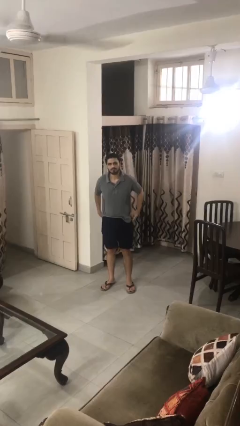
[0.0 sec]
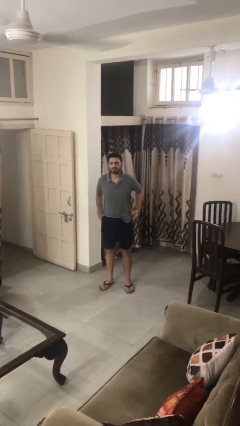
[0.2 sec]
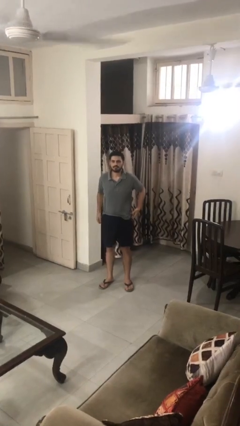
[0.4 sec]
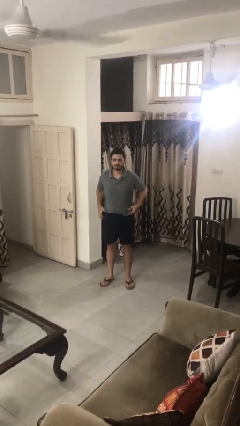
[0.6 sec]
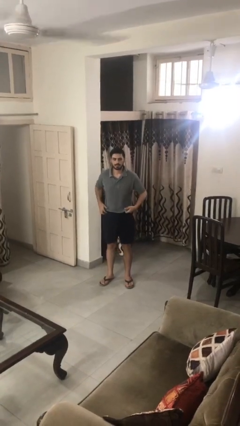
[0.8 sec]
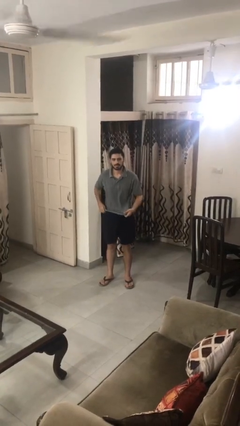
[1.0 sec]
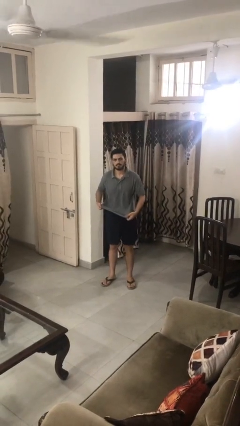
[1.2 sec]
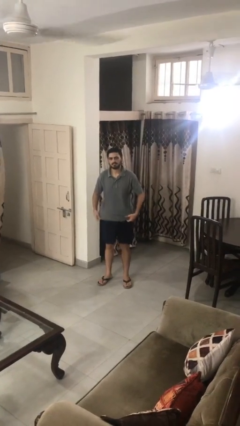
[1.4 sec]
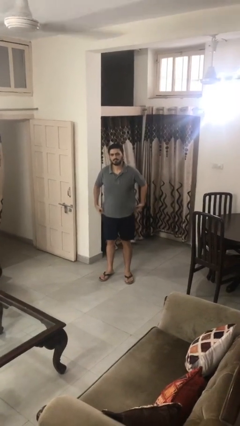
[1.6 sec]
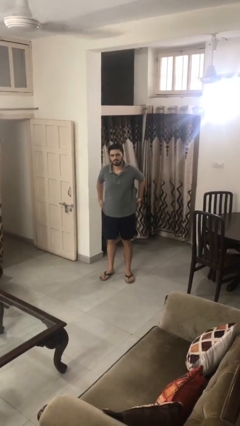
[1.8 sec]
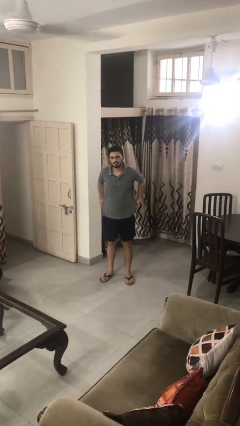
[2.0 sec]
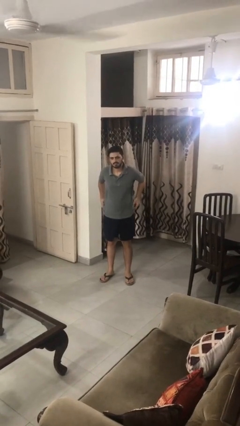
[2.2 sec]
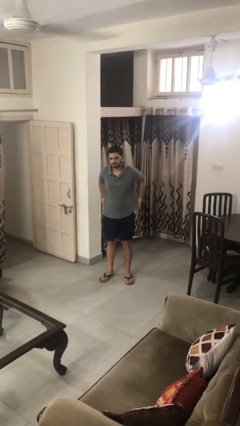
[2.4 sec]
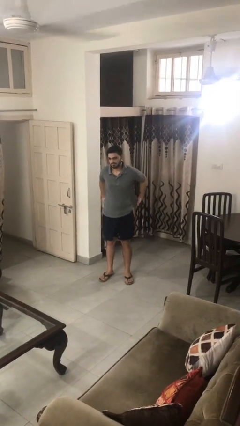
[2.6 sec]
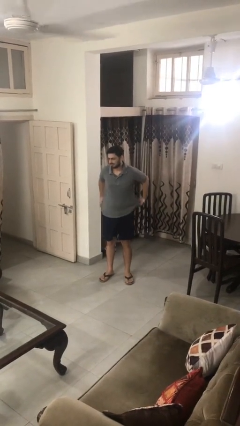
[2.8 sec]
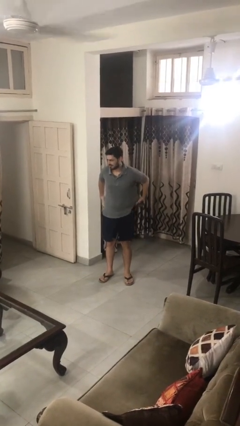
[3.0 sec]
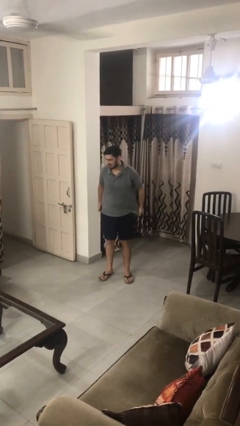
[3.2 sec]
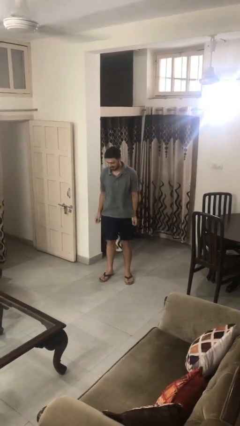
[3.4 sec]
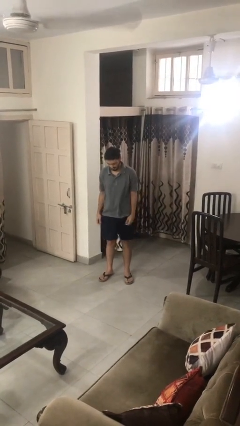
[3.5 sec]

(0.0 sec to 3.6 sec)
person untucks shirt

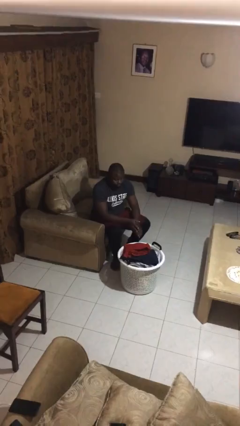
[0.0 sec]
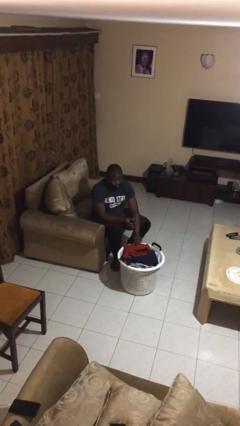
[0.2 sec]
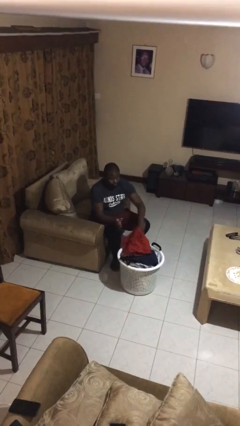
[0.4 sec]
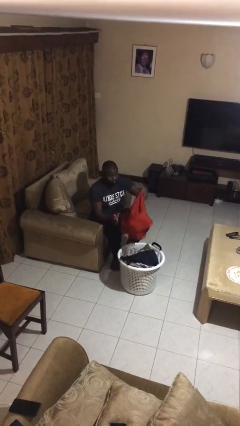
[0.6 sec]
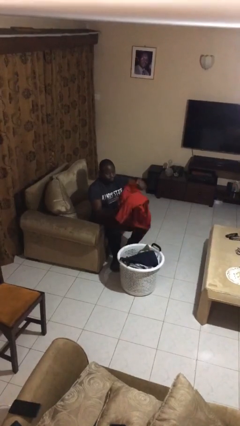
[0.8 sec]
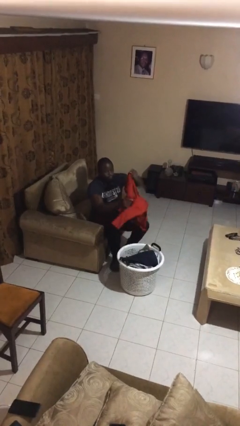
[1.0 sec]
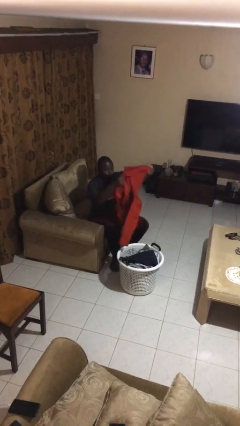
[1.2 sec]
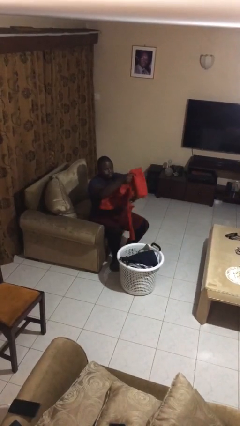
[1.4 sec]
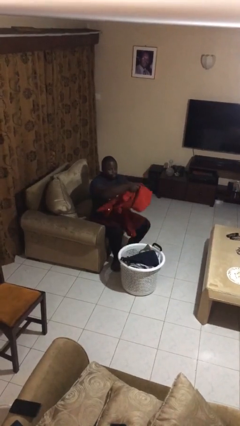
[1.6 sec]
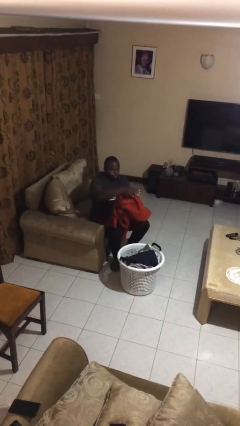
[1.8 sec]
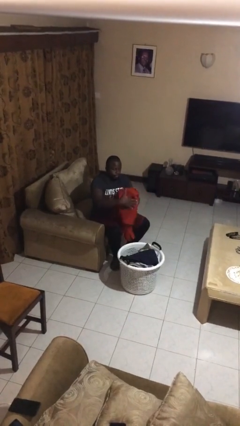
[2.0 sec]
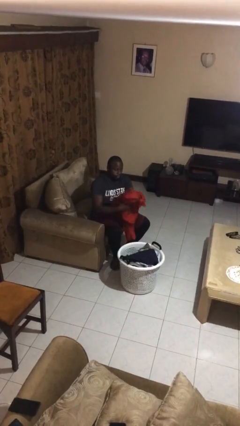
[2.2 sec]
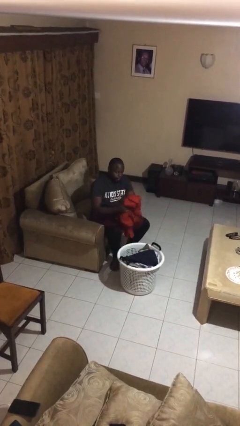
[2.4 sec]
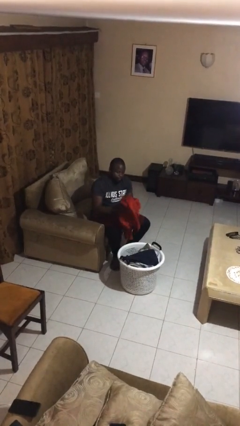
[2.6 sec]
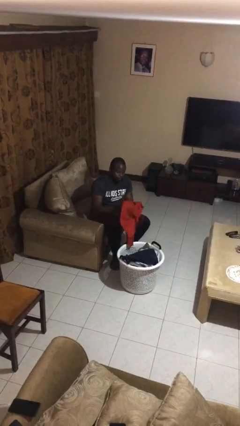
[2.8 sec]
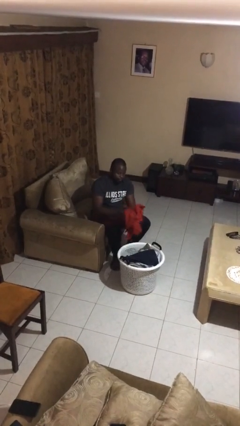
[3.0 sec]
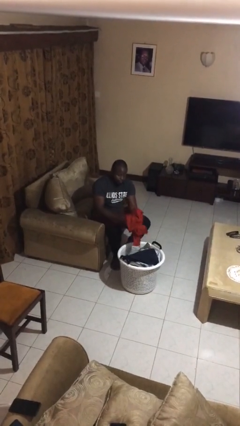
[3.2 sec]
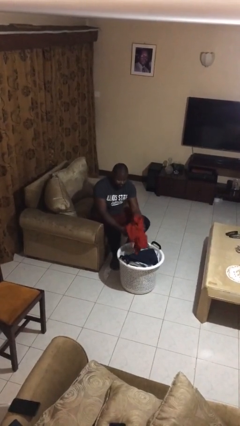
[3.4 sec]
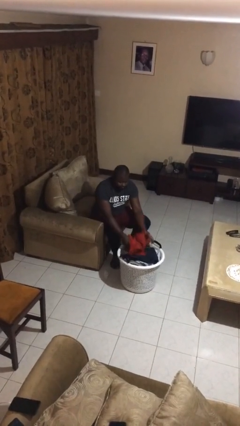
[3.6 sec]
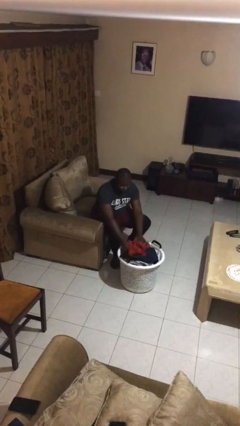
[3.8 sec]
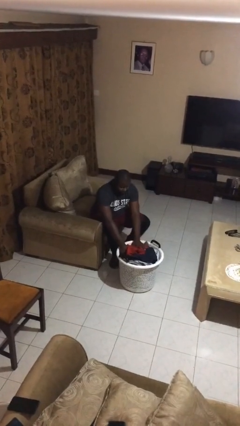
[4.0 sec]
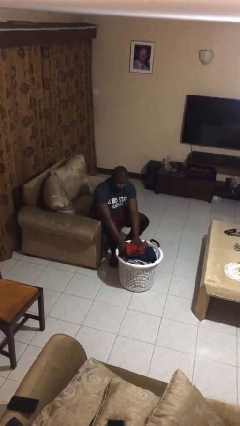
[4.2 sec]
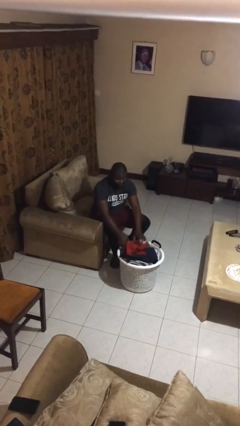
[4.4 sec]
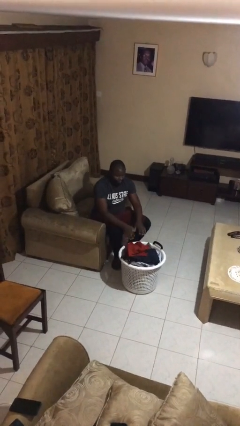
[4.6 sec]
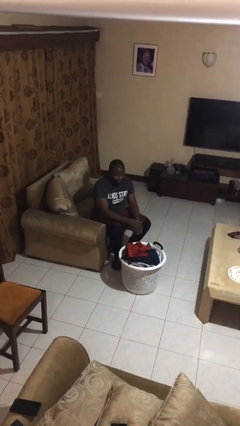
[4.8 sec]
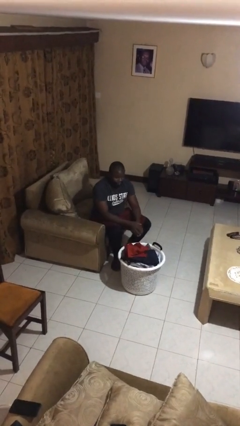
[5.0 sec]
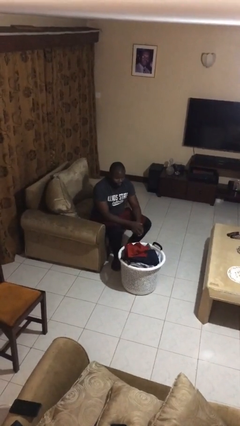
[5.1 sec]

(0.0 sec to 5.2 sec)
person folds shirt

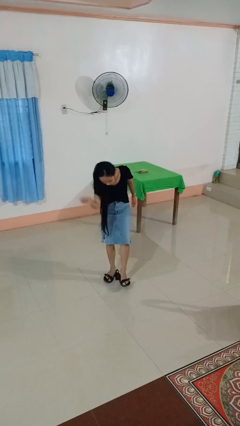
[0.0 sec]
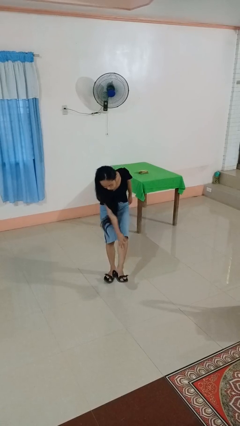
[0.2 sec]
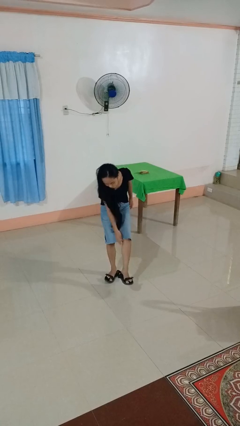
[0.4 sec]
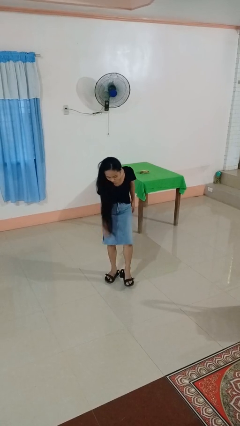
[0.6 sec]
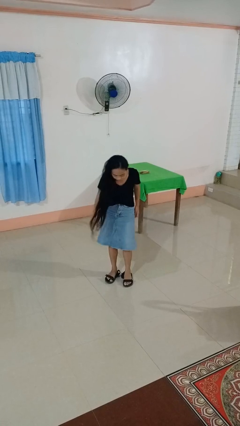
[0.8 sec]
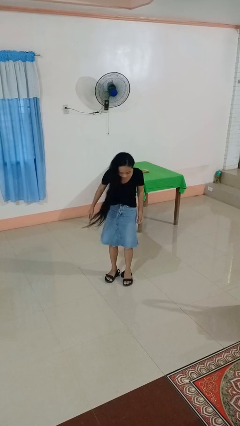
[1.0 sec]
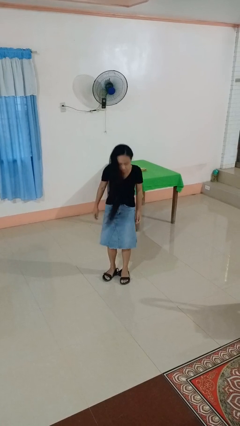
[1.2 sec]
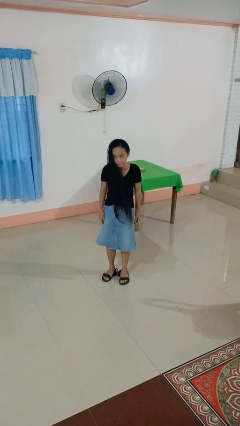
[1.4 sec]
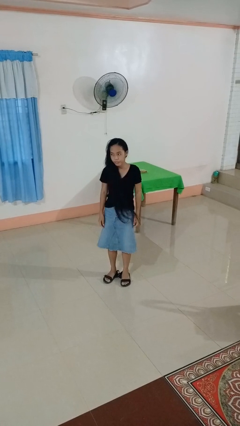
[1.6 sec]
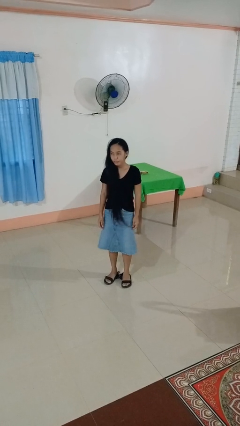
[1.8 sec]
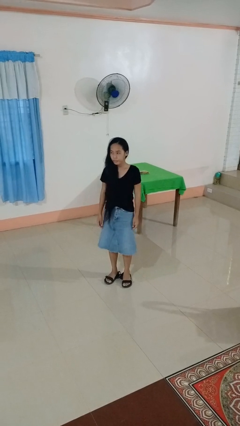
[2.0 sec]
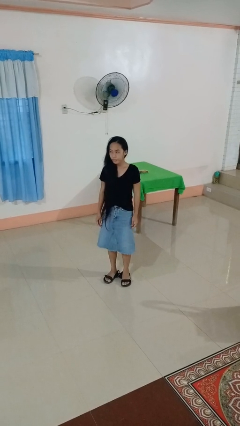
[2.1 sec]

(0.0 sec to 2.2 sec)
person swats bug

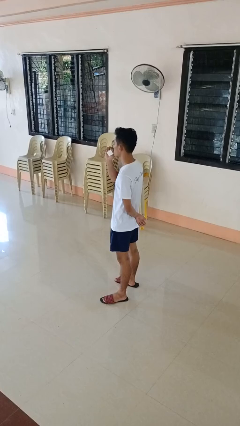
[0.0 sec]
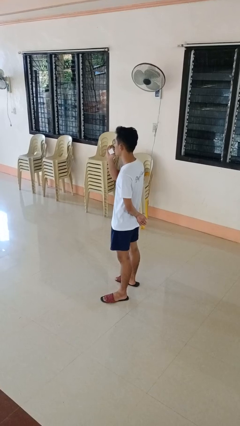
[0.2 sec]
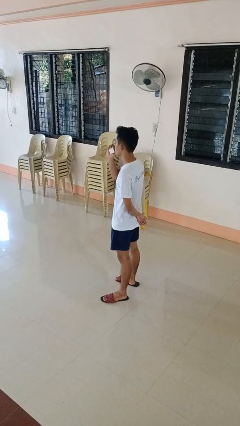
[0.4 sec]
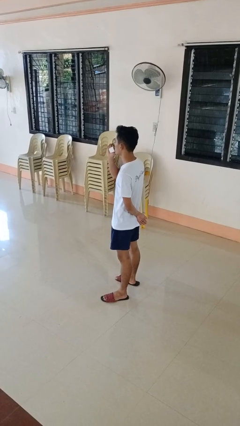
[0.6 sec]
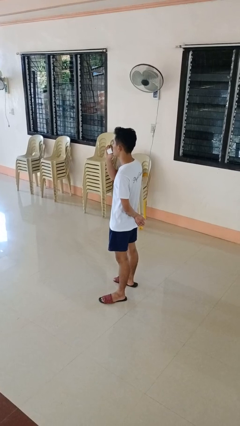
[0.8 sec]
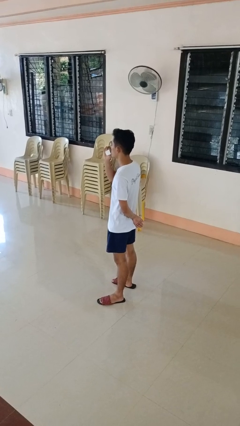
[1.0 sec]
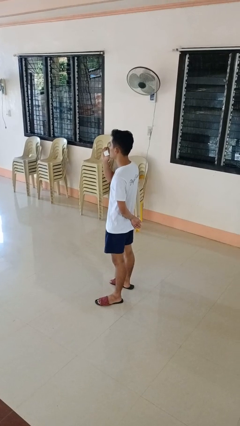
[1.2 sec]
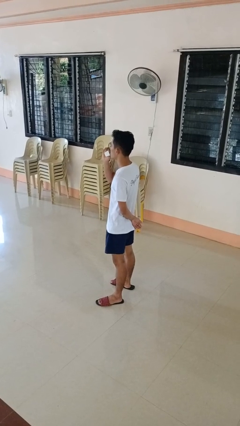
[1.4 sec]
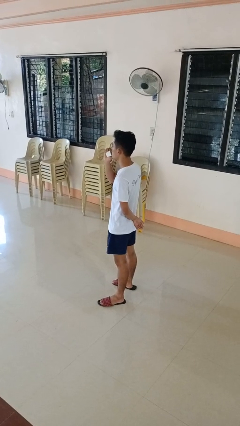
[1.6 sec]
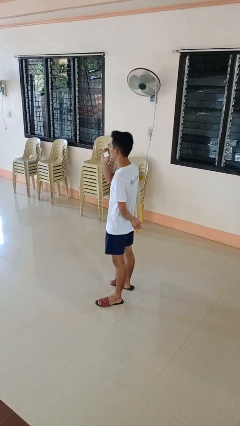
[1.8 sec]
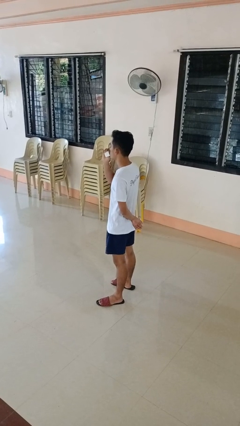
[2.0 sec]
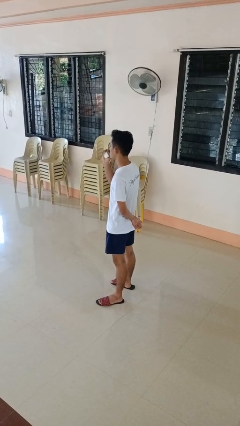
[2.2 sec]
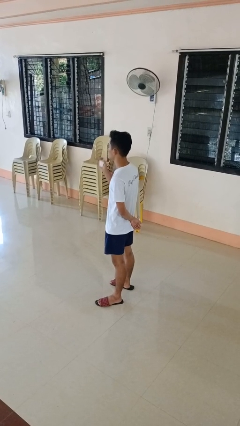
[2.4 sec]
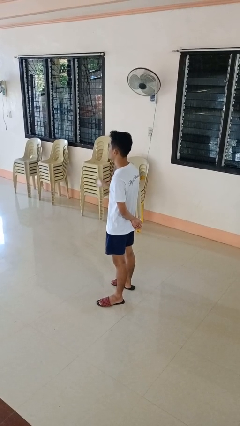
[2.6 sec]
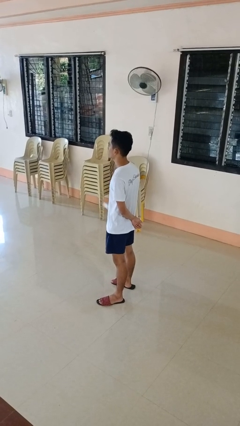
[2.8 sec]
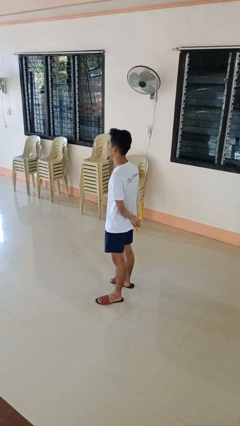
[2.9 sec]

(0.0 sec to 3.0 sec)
person vapes

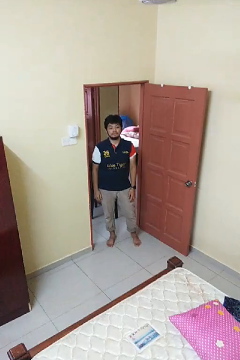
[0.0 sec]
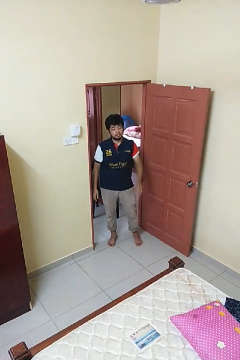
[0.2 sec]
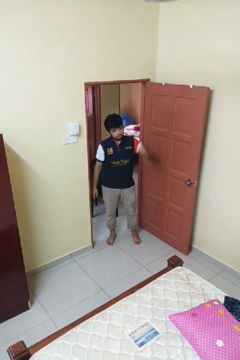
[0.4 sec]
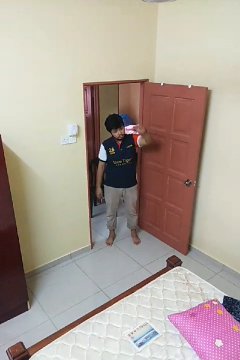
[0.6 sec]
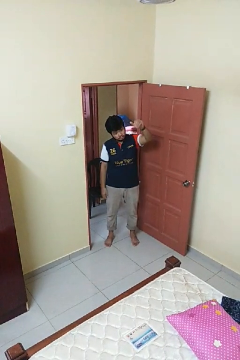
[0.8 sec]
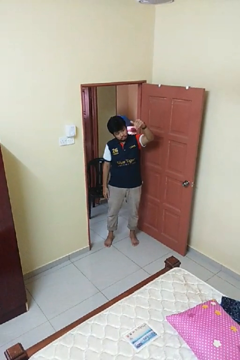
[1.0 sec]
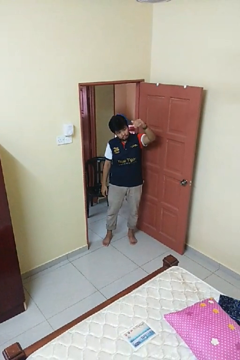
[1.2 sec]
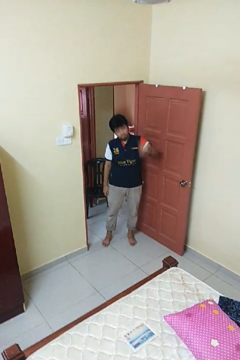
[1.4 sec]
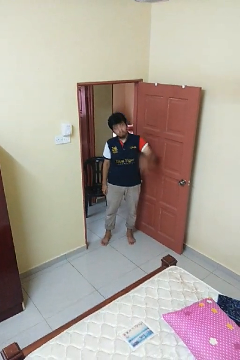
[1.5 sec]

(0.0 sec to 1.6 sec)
person gestures come here

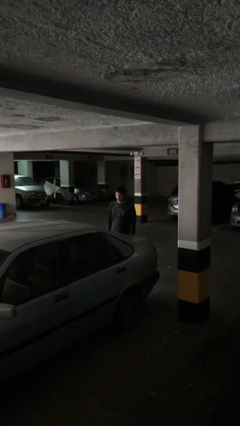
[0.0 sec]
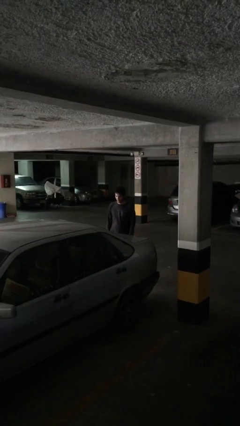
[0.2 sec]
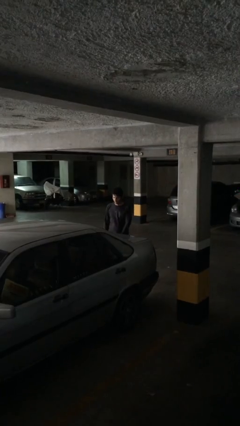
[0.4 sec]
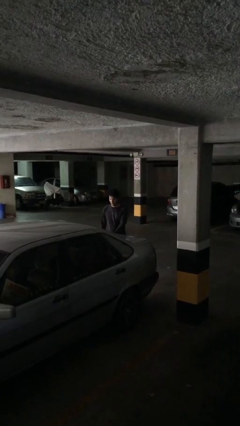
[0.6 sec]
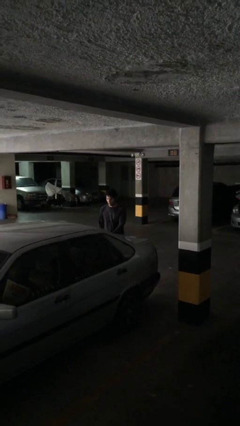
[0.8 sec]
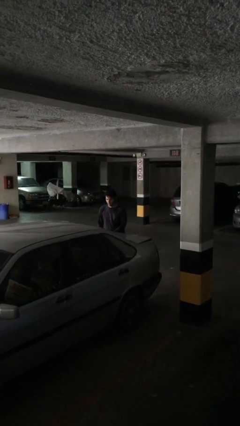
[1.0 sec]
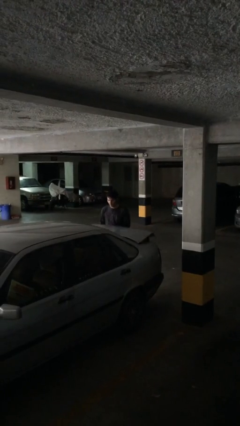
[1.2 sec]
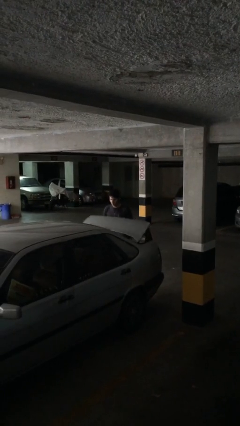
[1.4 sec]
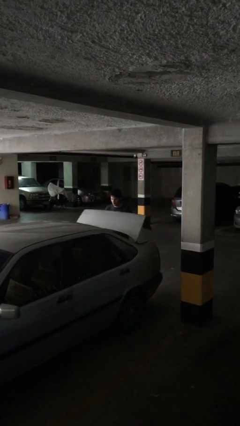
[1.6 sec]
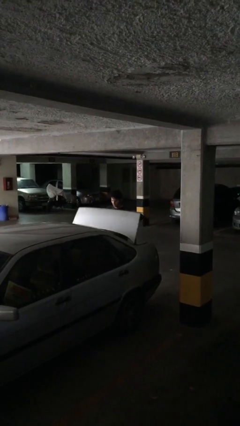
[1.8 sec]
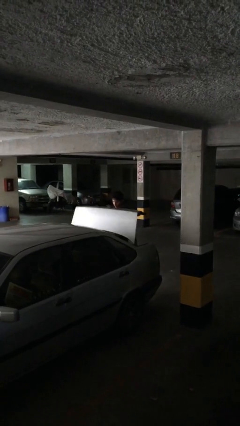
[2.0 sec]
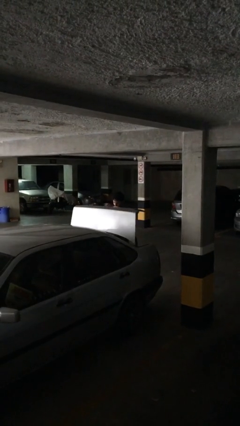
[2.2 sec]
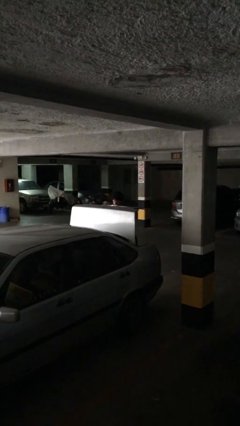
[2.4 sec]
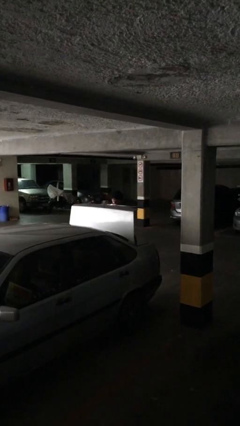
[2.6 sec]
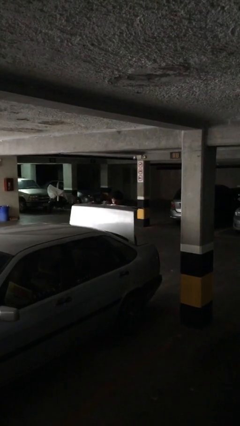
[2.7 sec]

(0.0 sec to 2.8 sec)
person opens car trunk
